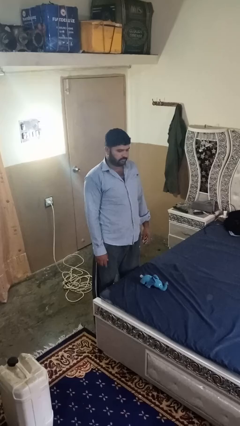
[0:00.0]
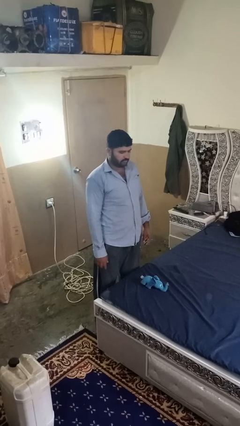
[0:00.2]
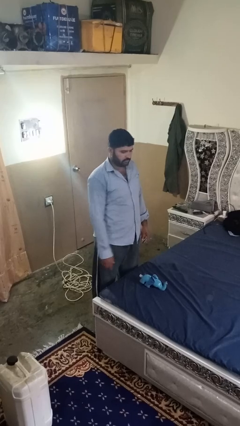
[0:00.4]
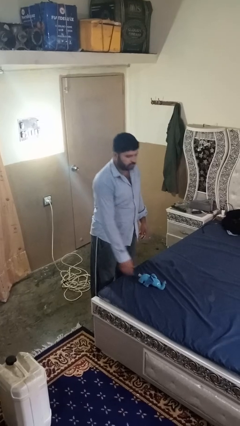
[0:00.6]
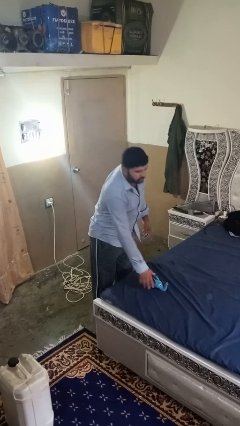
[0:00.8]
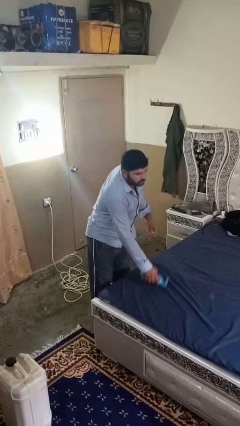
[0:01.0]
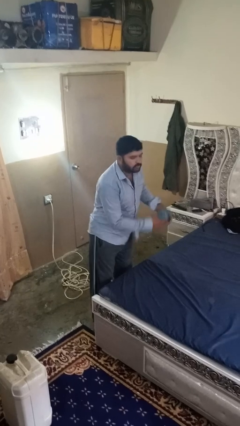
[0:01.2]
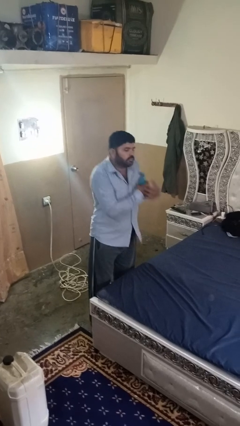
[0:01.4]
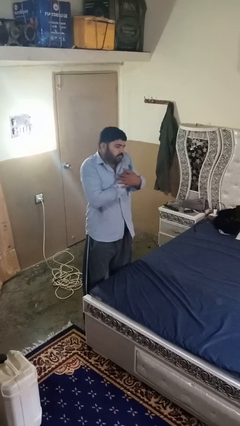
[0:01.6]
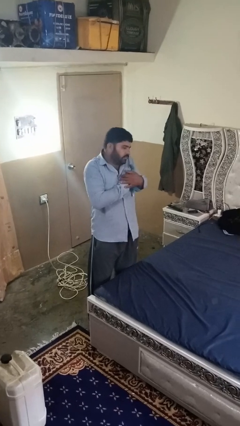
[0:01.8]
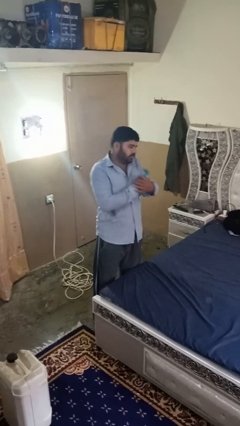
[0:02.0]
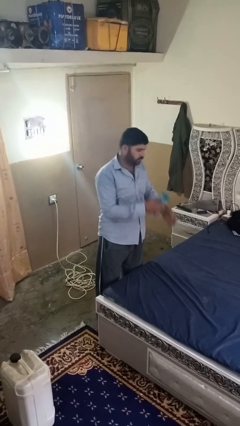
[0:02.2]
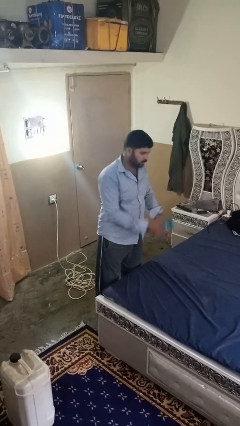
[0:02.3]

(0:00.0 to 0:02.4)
person hugs stuffed animal

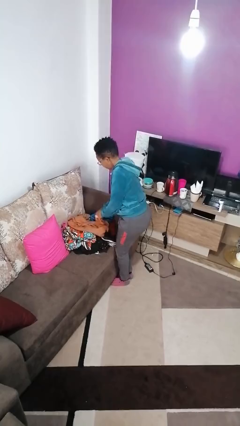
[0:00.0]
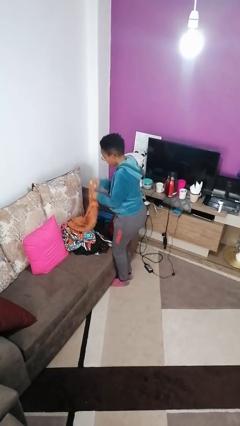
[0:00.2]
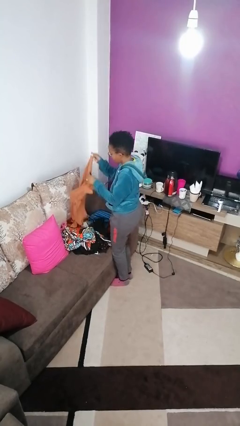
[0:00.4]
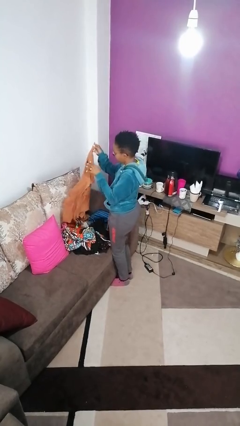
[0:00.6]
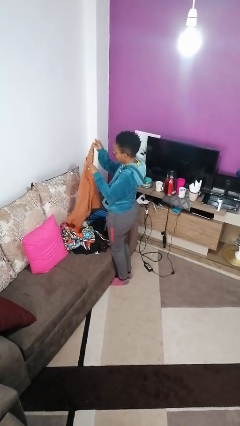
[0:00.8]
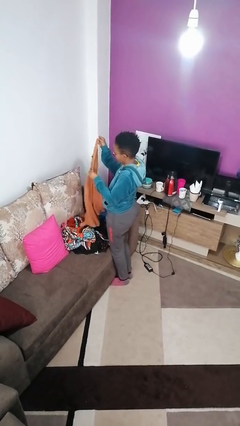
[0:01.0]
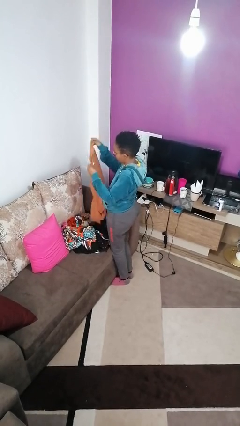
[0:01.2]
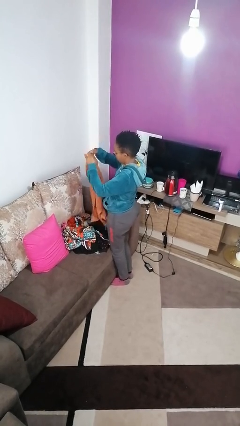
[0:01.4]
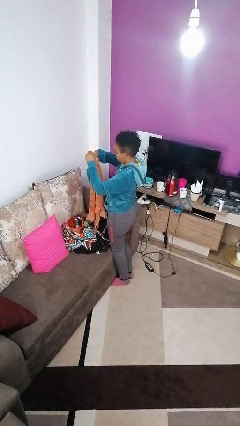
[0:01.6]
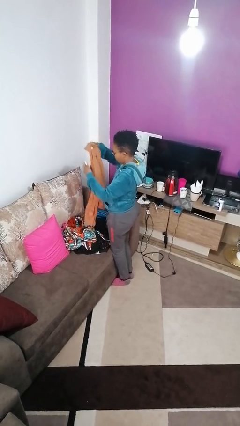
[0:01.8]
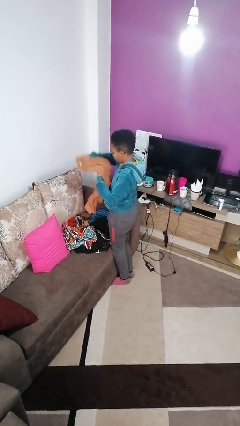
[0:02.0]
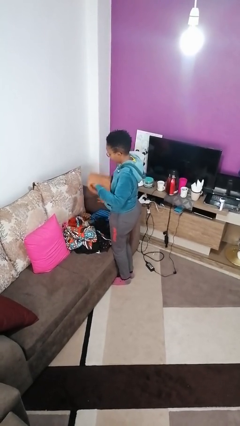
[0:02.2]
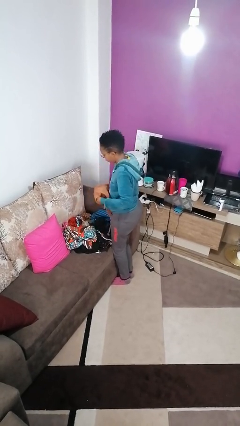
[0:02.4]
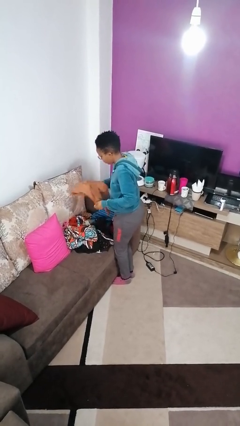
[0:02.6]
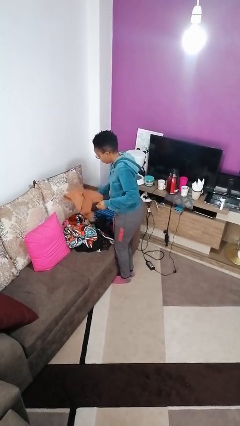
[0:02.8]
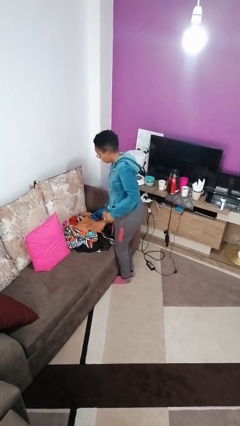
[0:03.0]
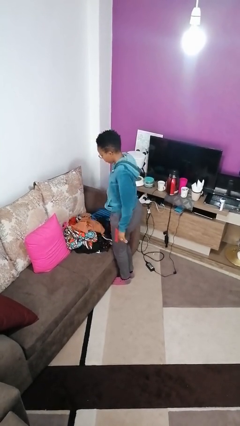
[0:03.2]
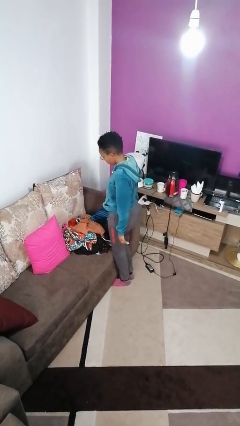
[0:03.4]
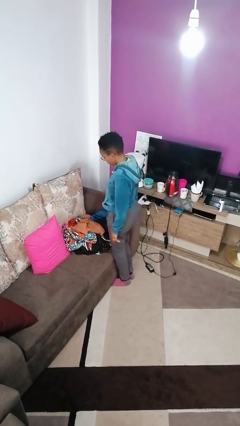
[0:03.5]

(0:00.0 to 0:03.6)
person folds shirt

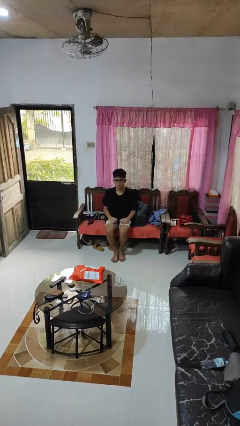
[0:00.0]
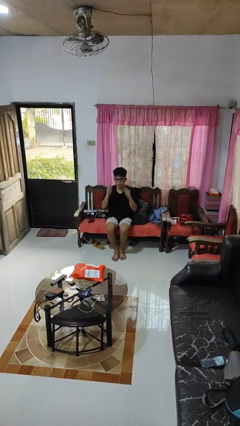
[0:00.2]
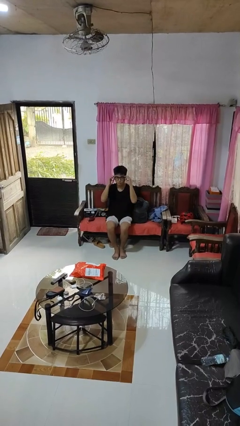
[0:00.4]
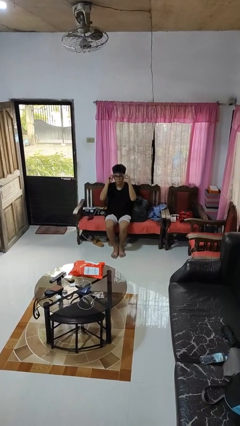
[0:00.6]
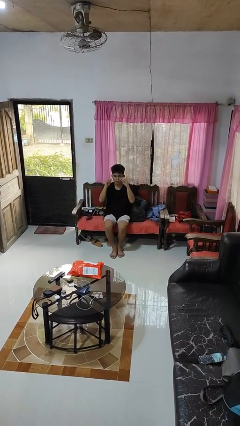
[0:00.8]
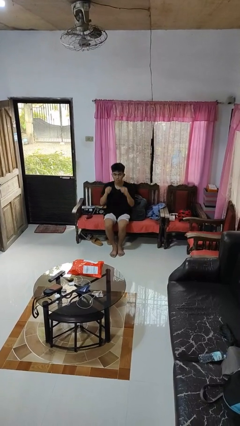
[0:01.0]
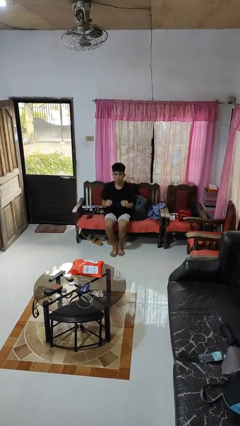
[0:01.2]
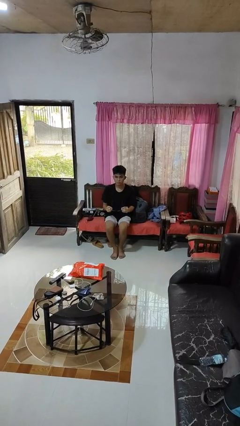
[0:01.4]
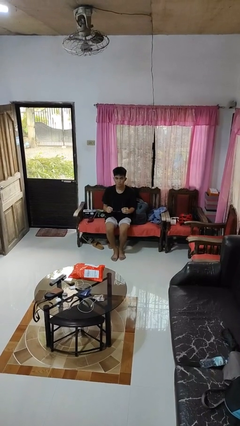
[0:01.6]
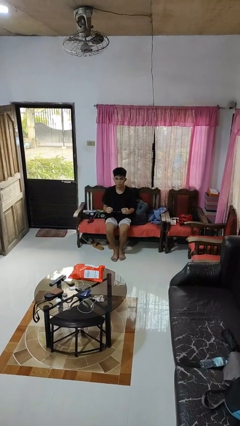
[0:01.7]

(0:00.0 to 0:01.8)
person takes off glasses

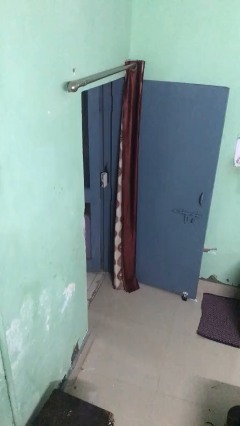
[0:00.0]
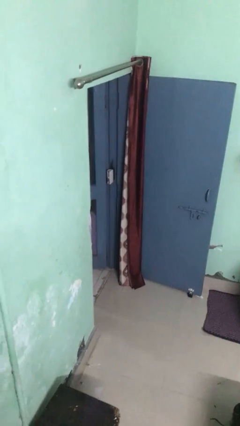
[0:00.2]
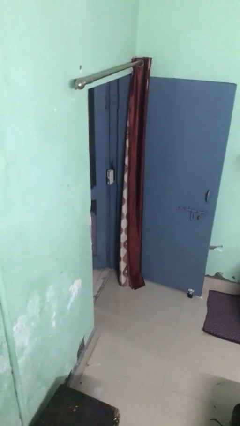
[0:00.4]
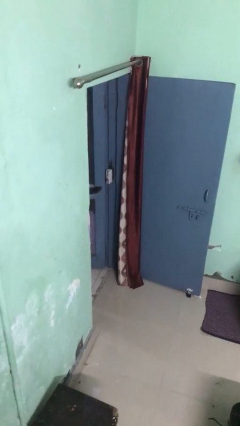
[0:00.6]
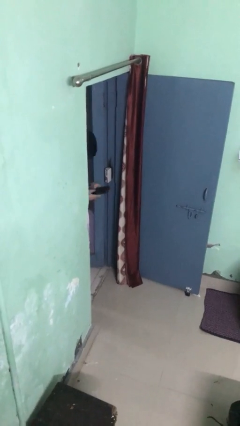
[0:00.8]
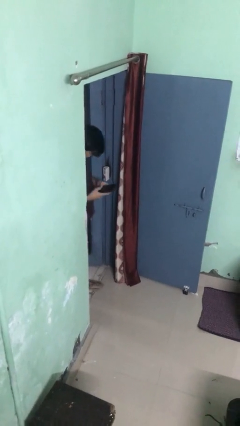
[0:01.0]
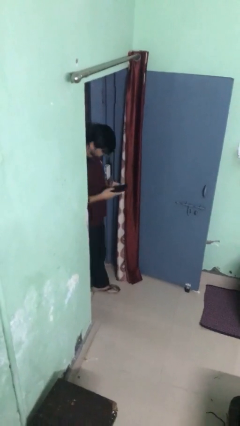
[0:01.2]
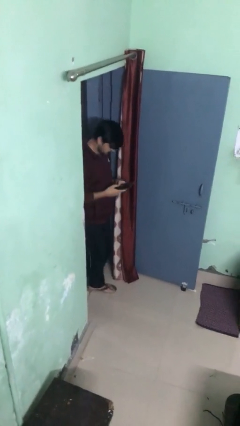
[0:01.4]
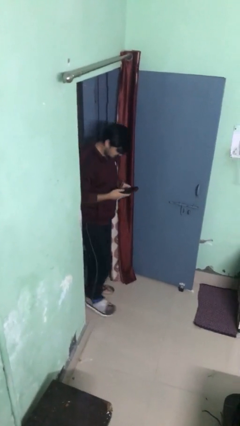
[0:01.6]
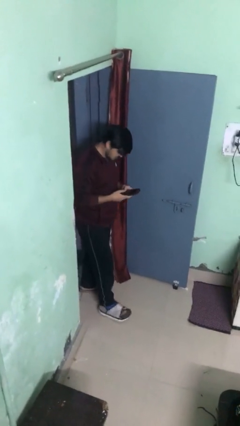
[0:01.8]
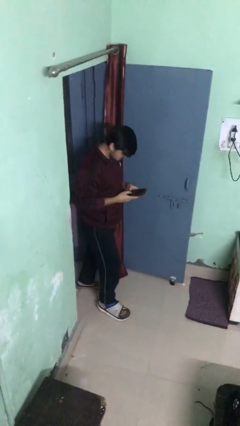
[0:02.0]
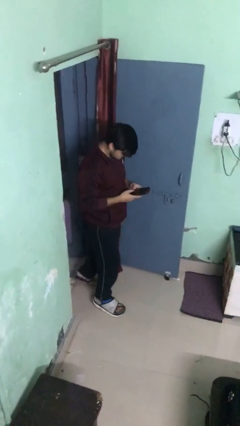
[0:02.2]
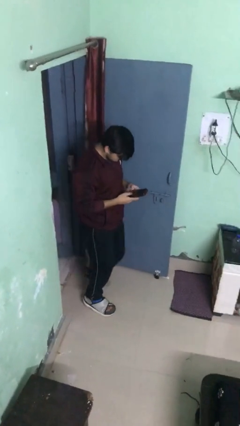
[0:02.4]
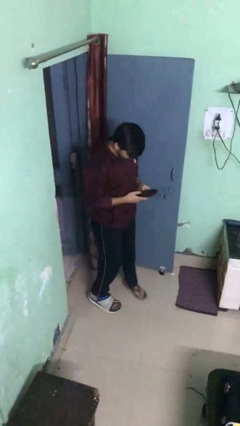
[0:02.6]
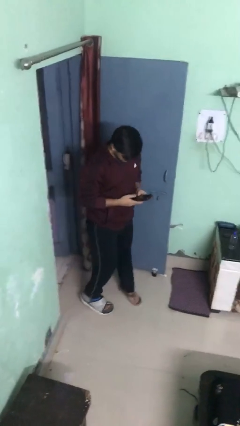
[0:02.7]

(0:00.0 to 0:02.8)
person enters scene through structure

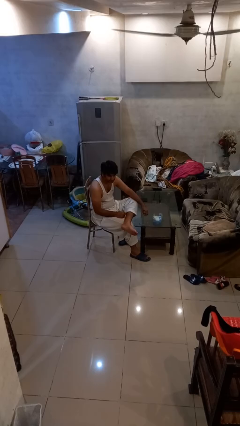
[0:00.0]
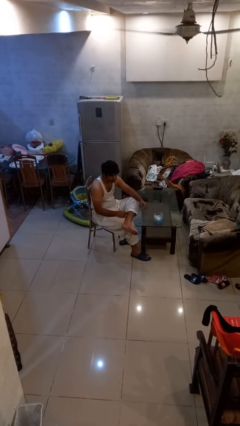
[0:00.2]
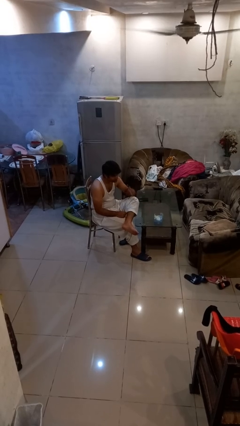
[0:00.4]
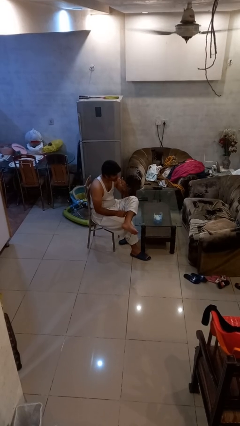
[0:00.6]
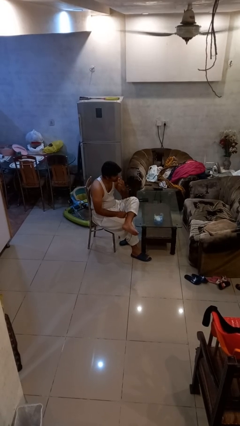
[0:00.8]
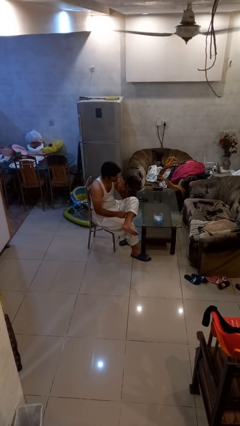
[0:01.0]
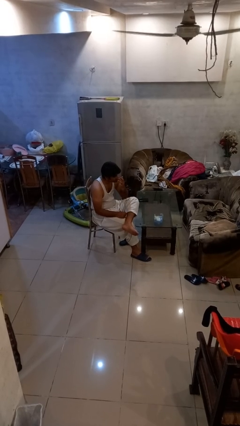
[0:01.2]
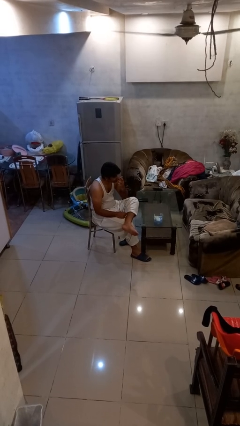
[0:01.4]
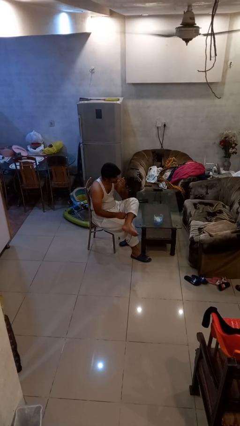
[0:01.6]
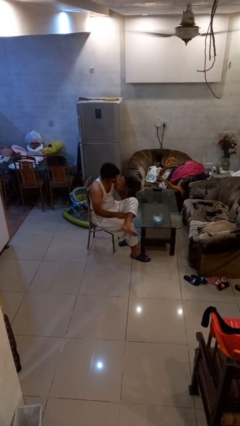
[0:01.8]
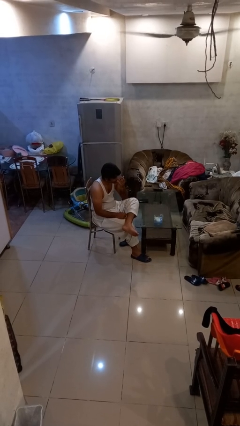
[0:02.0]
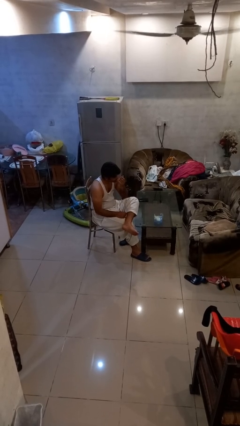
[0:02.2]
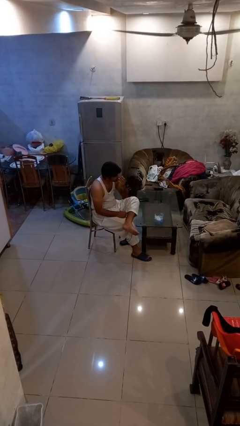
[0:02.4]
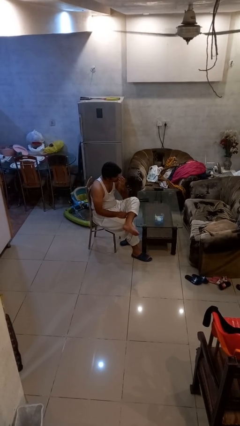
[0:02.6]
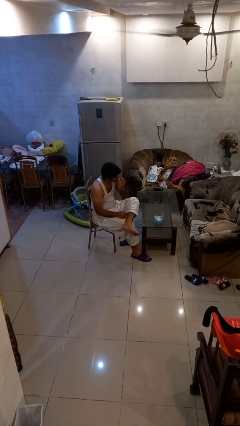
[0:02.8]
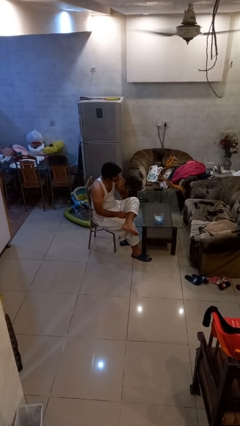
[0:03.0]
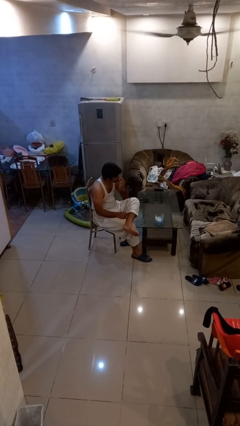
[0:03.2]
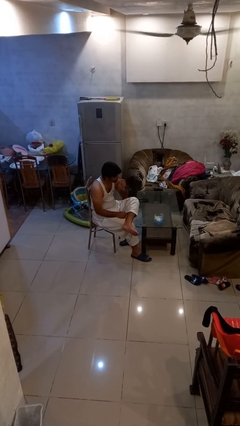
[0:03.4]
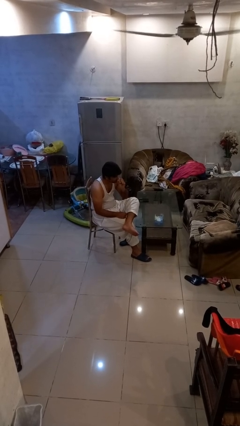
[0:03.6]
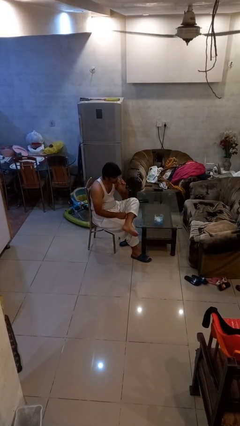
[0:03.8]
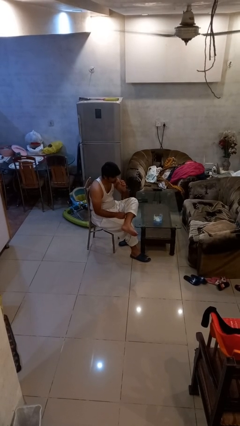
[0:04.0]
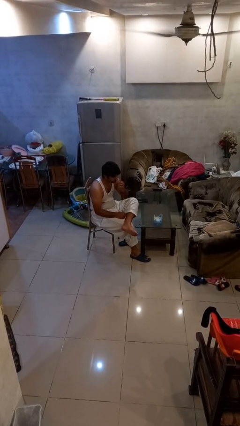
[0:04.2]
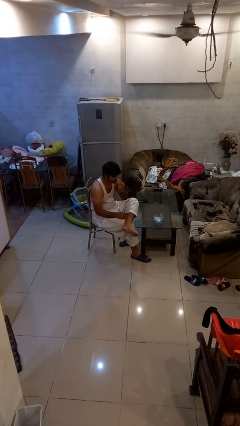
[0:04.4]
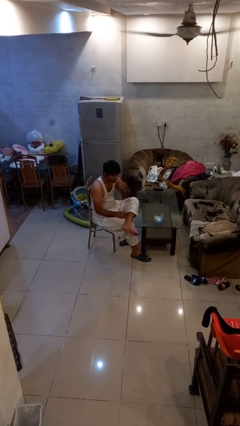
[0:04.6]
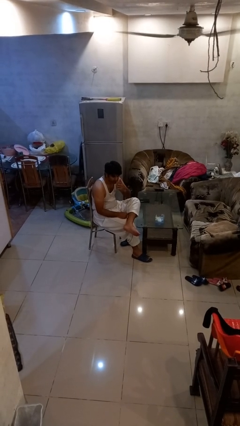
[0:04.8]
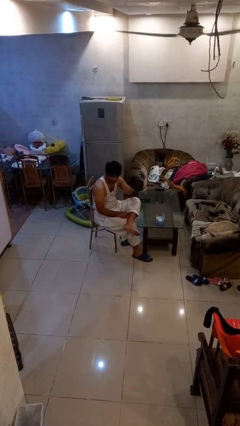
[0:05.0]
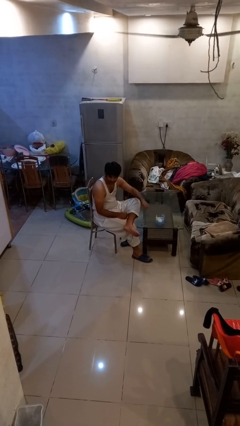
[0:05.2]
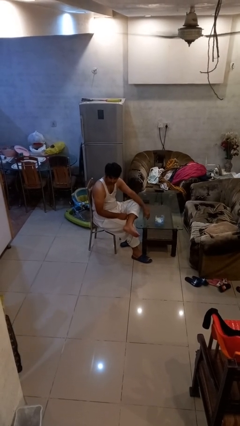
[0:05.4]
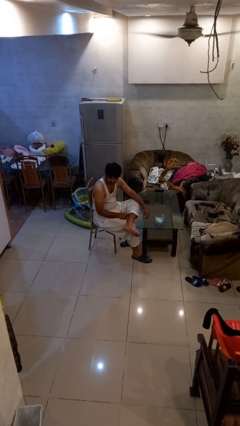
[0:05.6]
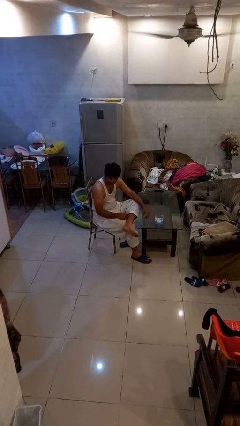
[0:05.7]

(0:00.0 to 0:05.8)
person licks fingers

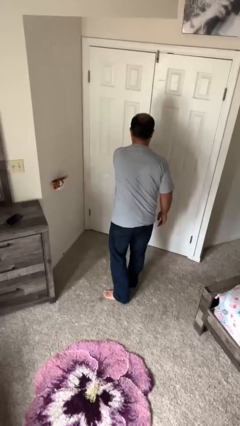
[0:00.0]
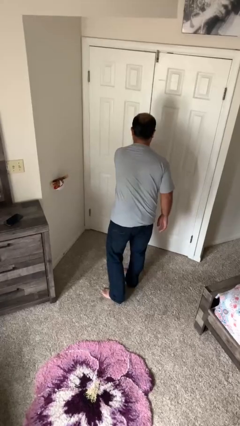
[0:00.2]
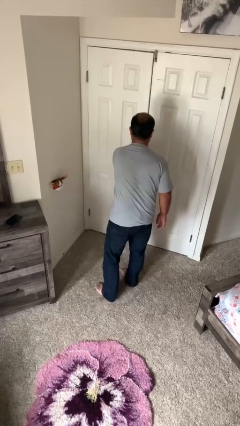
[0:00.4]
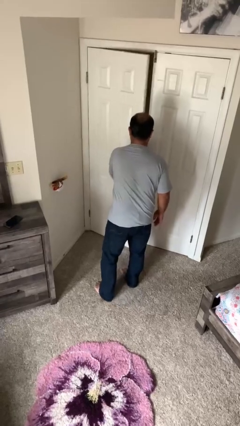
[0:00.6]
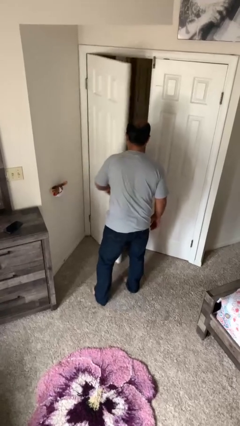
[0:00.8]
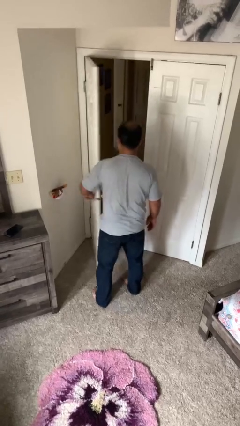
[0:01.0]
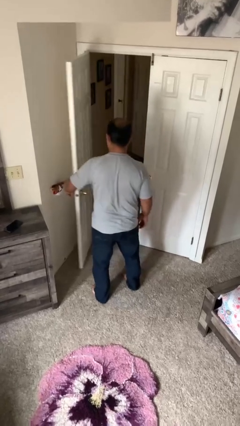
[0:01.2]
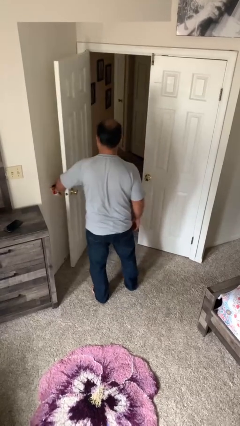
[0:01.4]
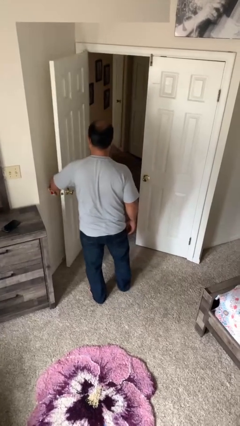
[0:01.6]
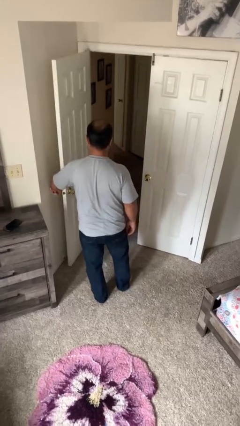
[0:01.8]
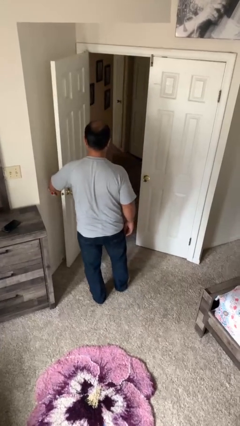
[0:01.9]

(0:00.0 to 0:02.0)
person opens facility door
